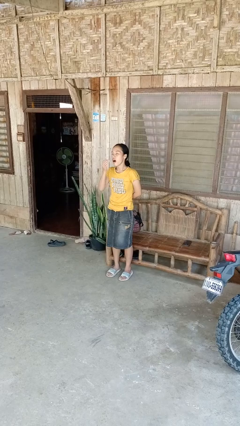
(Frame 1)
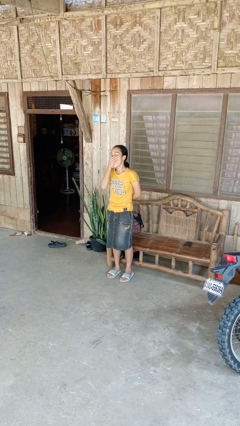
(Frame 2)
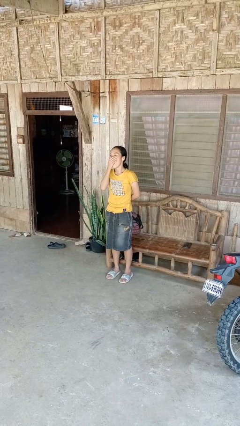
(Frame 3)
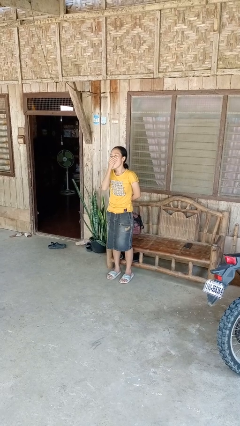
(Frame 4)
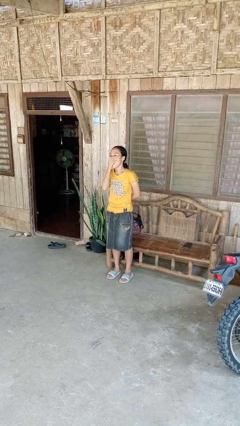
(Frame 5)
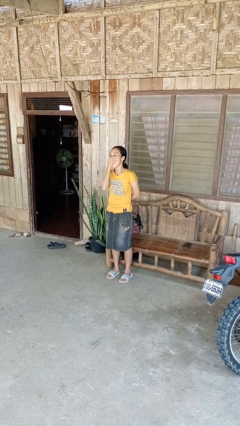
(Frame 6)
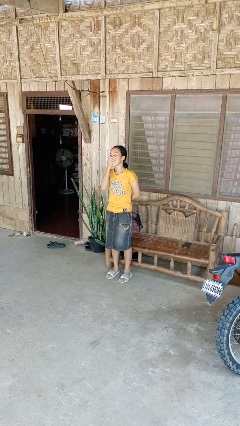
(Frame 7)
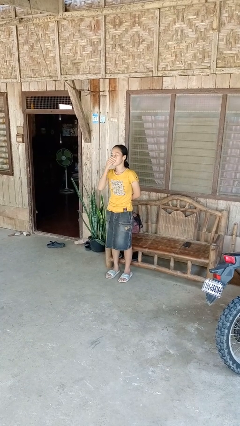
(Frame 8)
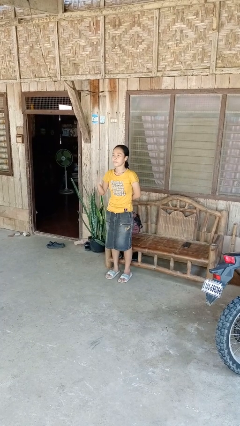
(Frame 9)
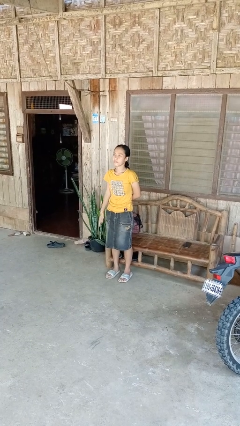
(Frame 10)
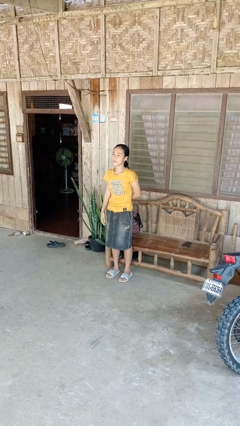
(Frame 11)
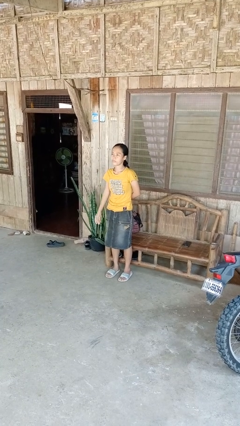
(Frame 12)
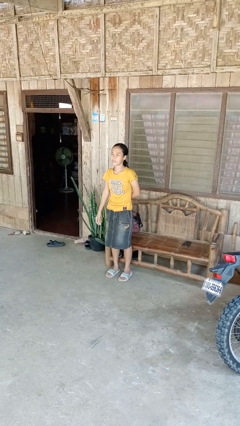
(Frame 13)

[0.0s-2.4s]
person yawns

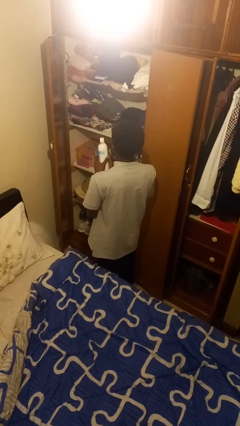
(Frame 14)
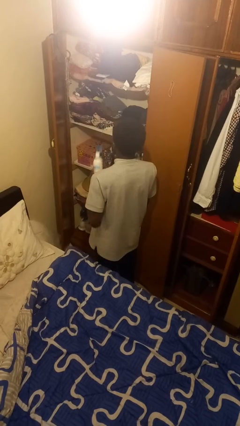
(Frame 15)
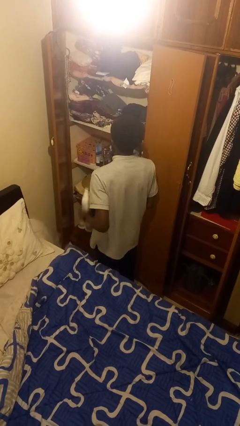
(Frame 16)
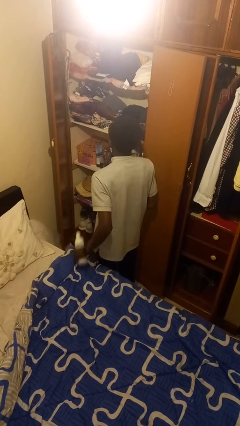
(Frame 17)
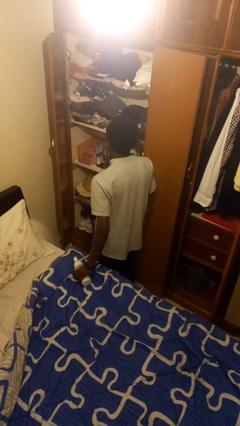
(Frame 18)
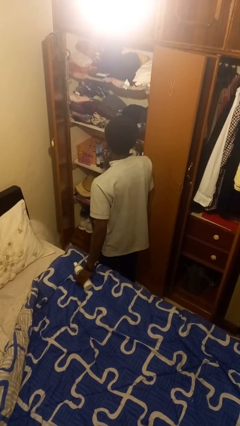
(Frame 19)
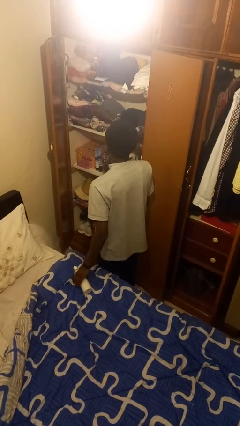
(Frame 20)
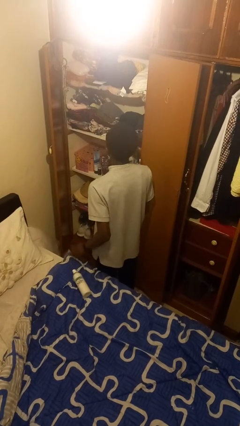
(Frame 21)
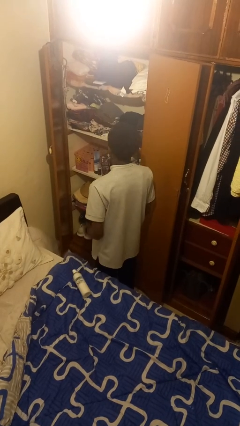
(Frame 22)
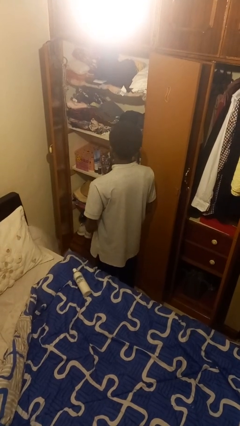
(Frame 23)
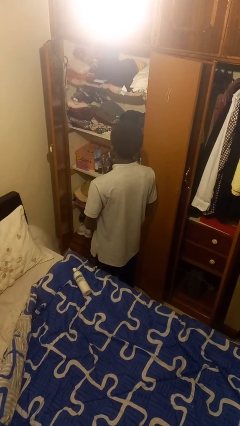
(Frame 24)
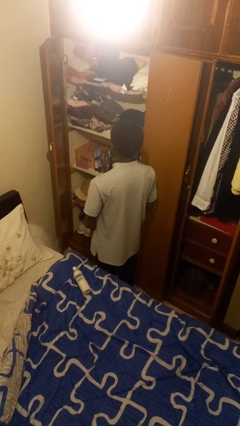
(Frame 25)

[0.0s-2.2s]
person puts down object on bed

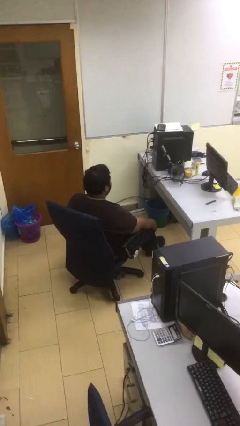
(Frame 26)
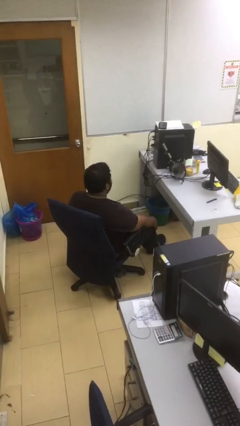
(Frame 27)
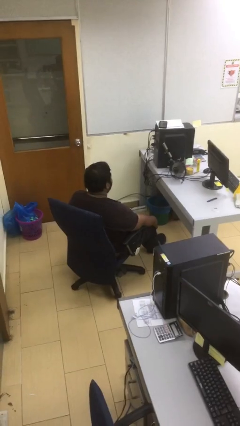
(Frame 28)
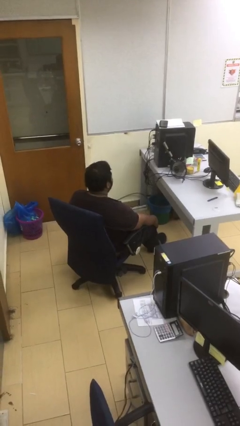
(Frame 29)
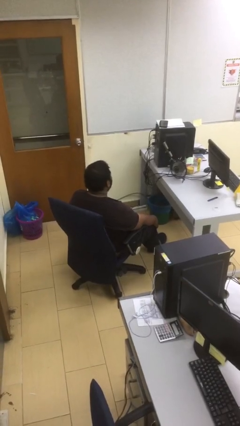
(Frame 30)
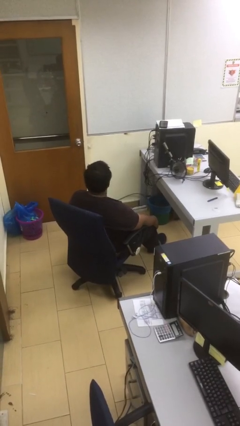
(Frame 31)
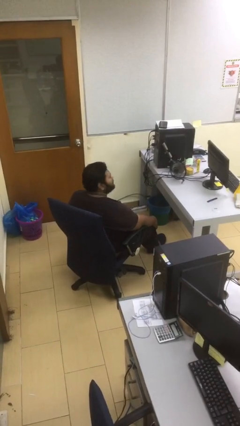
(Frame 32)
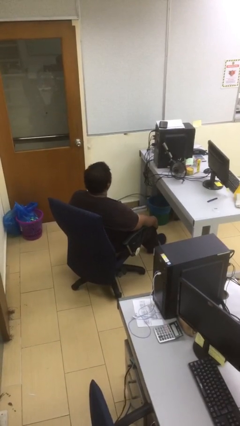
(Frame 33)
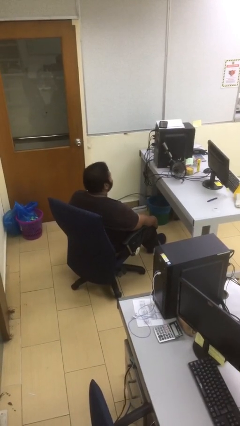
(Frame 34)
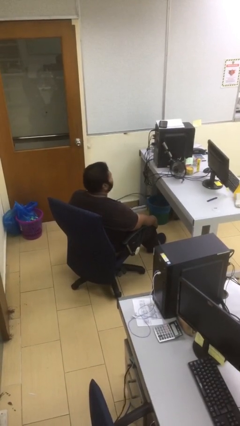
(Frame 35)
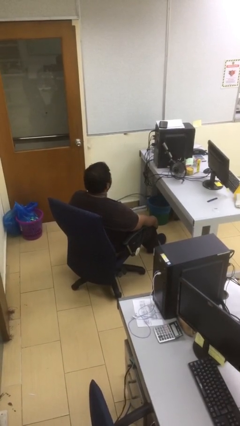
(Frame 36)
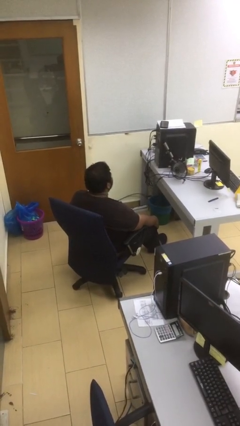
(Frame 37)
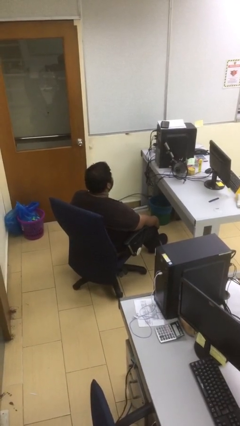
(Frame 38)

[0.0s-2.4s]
person shakes head

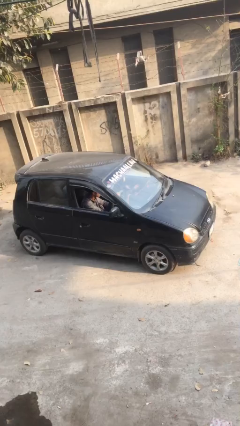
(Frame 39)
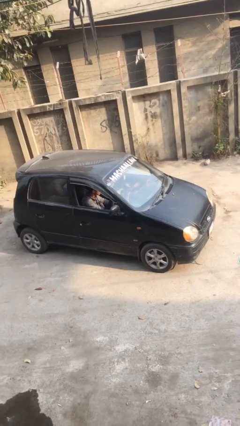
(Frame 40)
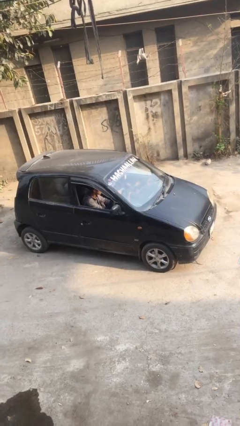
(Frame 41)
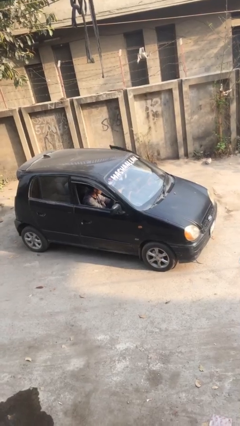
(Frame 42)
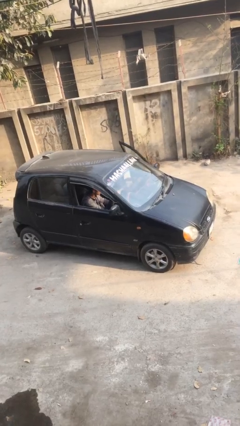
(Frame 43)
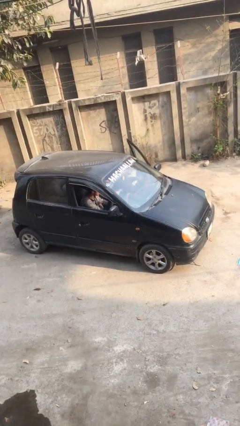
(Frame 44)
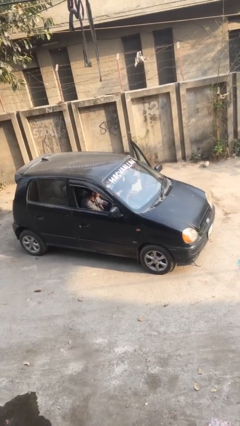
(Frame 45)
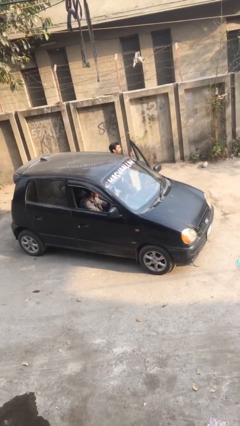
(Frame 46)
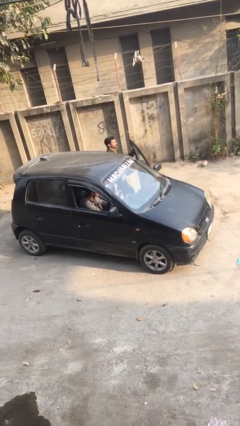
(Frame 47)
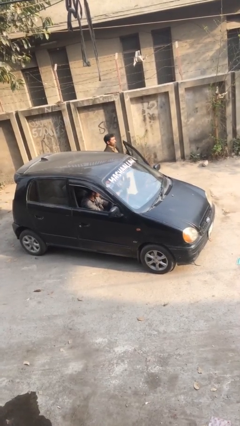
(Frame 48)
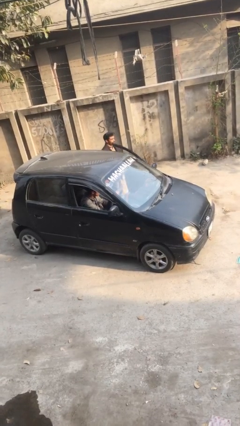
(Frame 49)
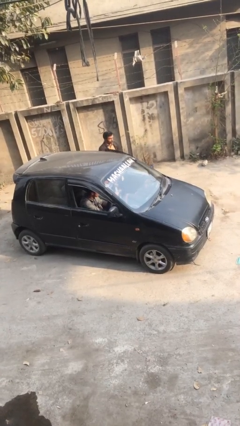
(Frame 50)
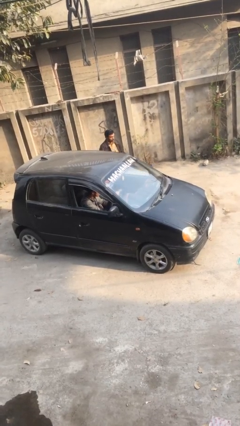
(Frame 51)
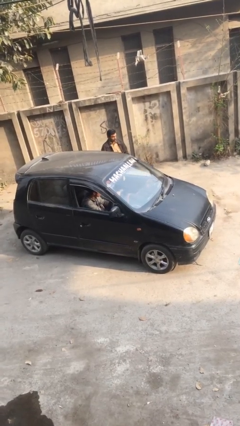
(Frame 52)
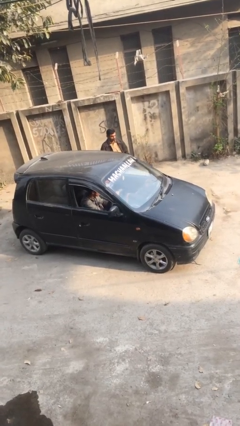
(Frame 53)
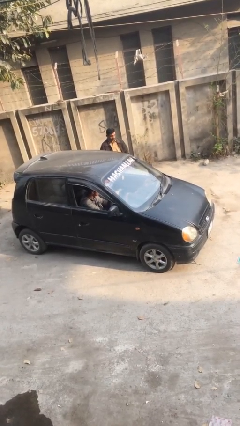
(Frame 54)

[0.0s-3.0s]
car drops off person

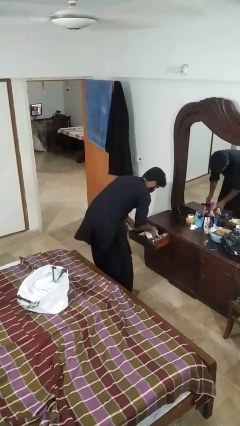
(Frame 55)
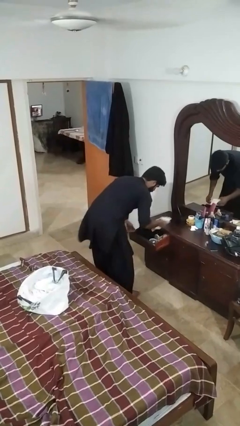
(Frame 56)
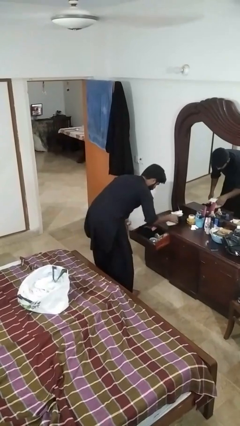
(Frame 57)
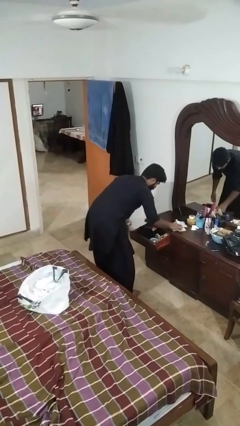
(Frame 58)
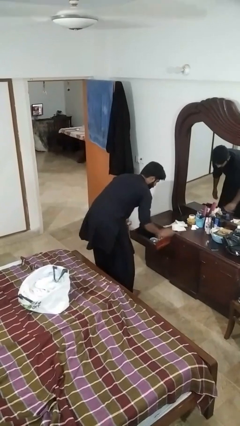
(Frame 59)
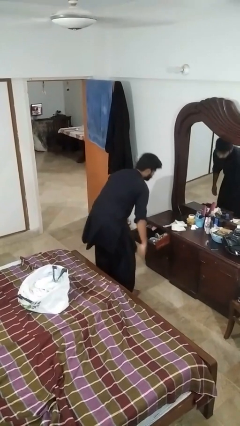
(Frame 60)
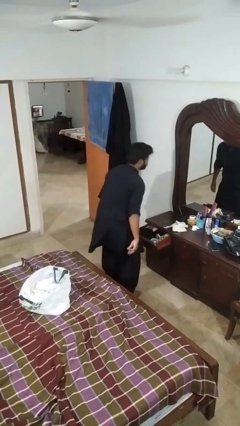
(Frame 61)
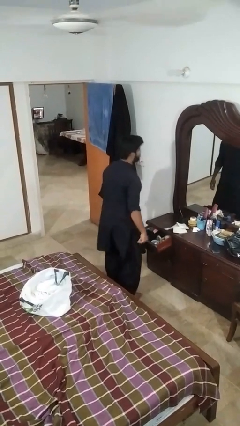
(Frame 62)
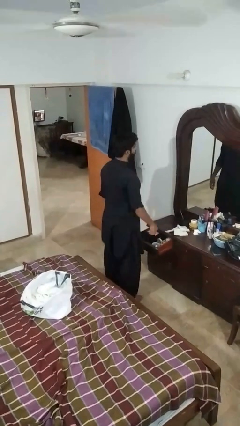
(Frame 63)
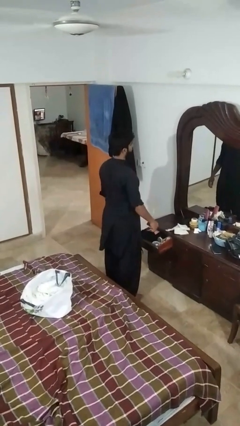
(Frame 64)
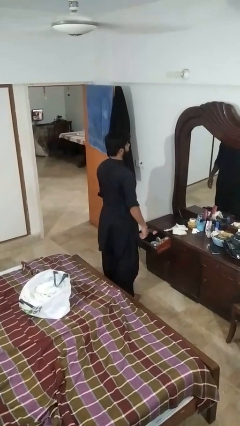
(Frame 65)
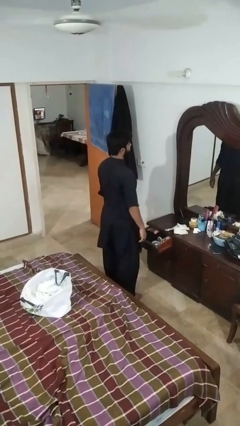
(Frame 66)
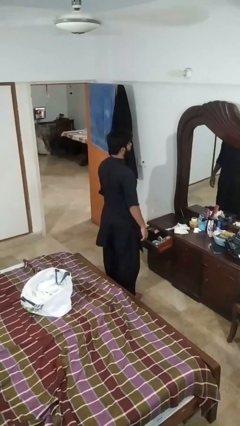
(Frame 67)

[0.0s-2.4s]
person takes clothes from dresser

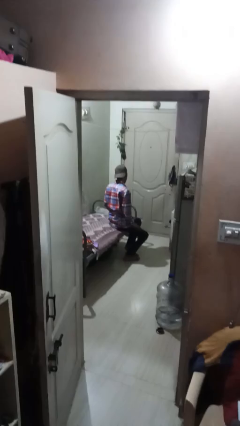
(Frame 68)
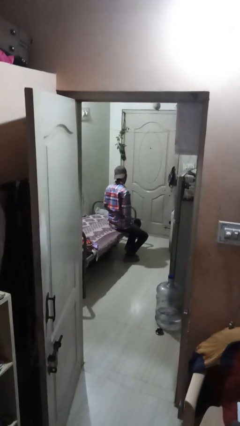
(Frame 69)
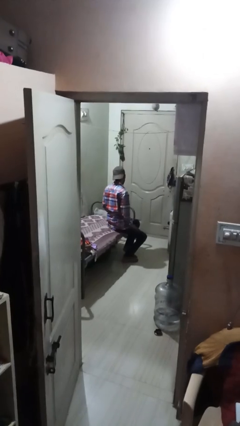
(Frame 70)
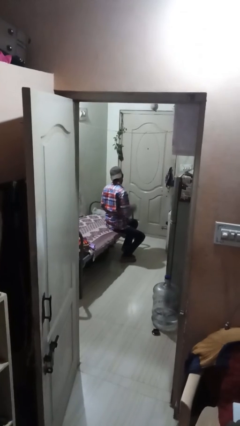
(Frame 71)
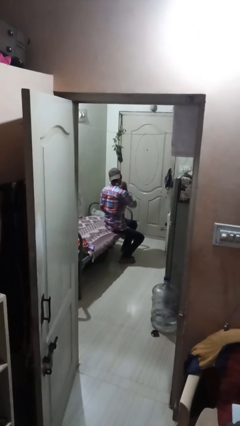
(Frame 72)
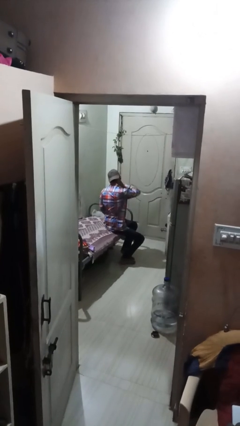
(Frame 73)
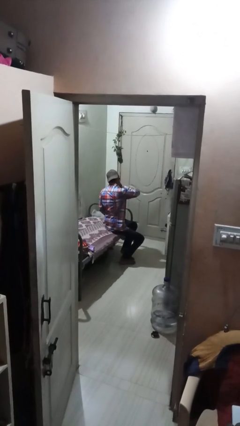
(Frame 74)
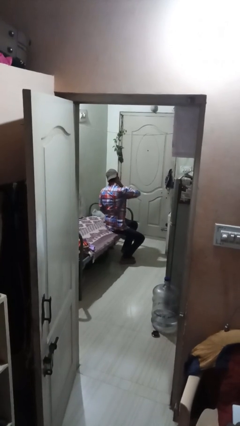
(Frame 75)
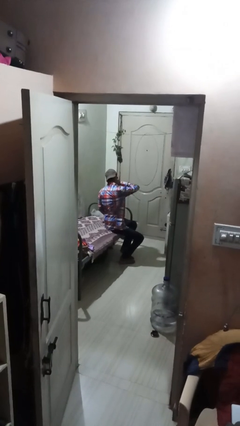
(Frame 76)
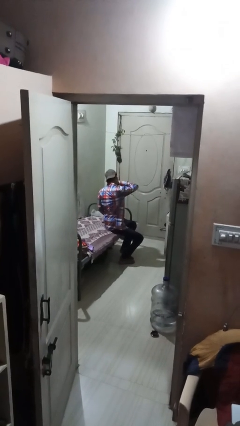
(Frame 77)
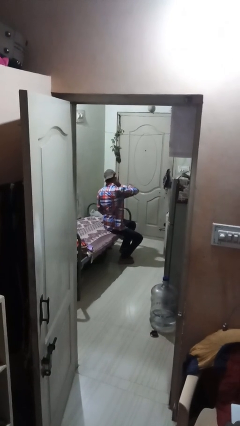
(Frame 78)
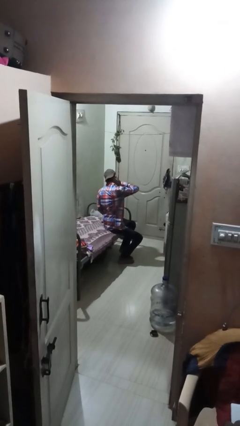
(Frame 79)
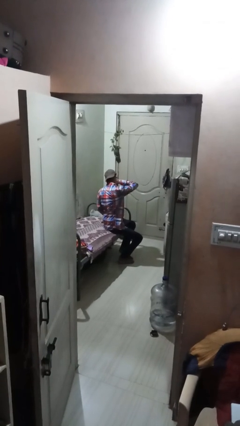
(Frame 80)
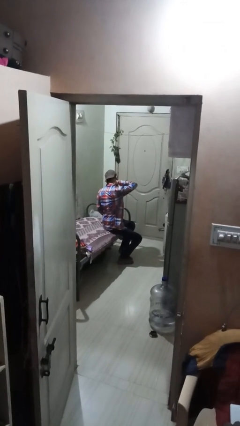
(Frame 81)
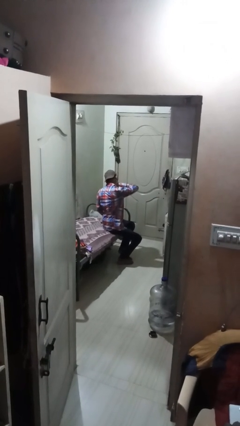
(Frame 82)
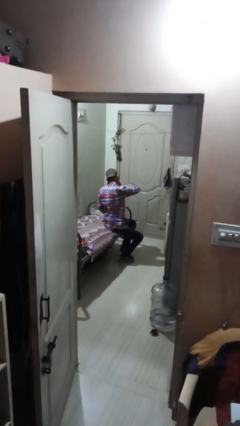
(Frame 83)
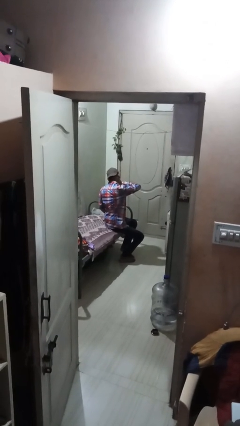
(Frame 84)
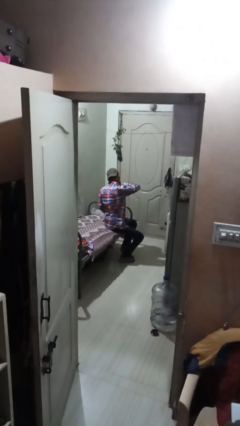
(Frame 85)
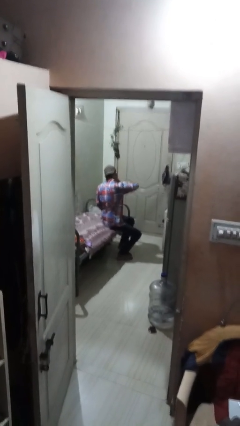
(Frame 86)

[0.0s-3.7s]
person rubs neck

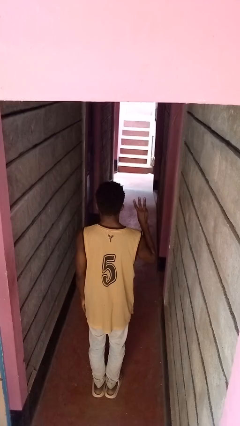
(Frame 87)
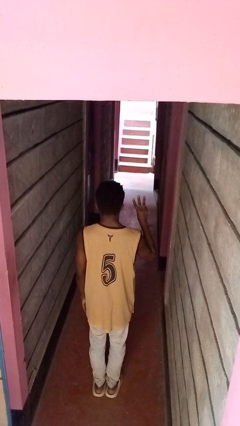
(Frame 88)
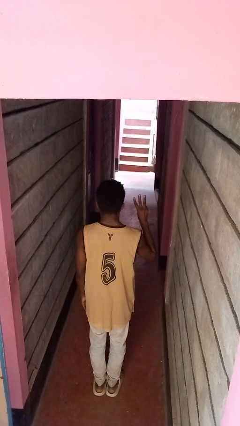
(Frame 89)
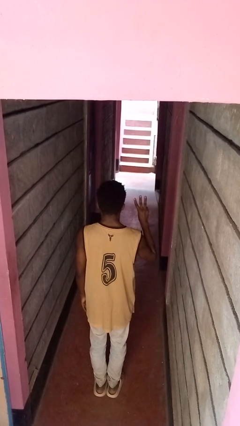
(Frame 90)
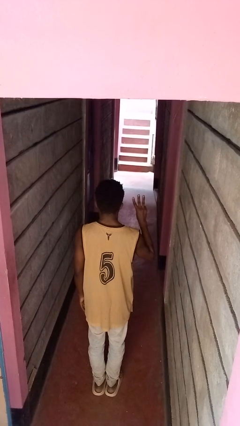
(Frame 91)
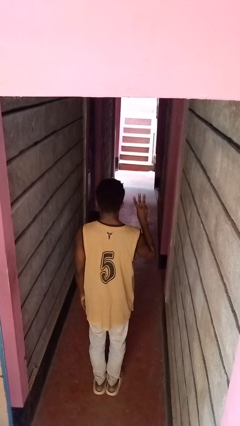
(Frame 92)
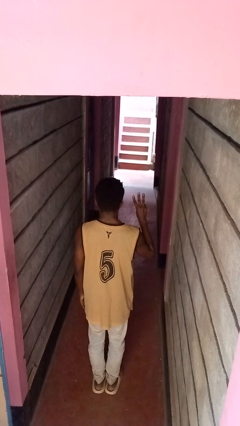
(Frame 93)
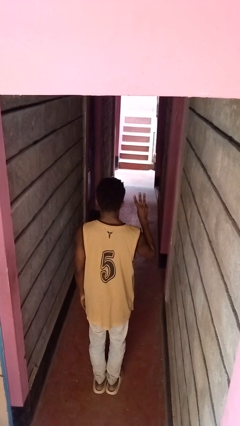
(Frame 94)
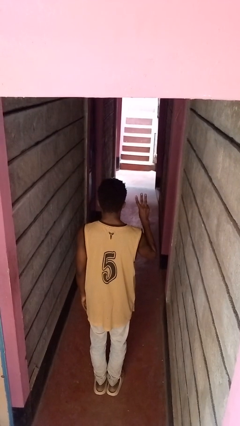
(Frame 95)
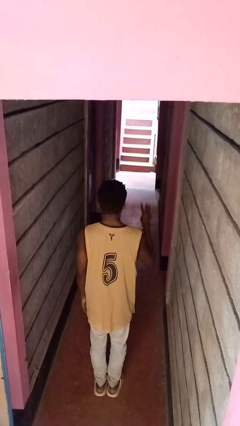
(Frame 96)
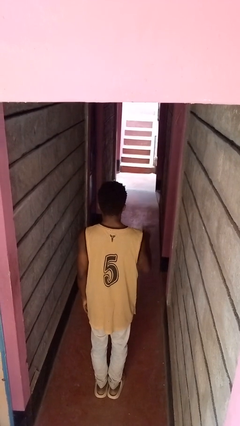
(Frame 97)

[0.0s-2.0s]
person gestures number three
